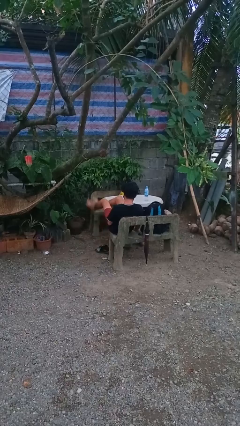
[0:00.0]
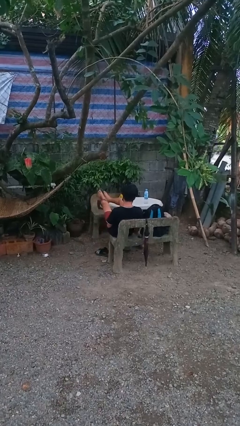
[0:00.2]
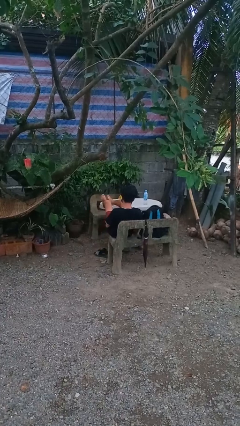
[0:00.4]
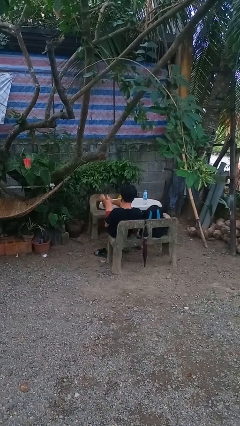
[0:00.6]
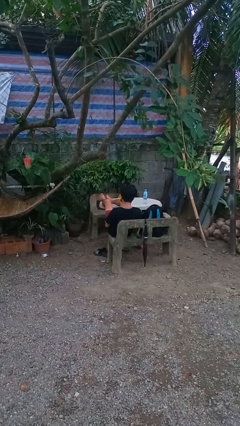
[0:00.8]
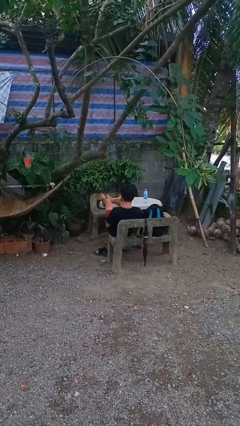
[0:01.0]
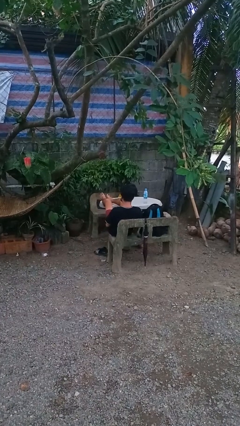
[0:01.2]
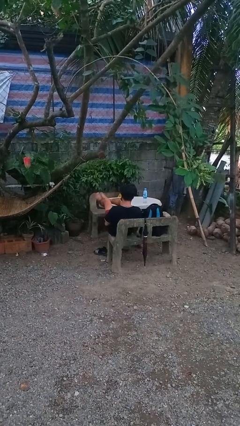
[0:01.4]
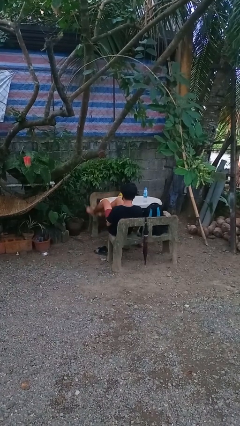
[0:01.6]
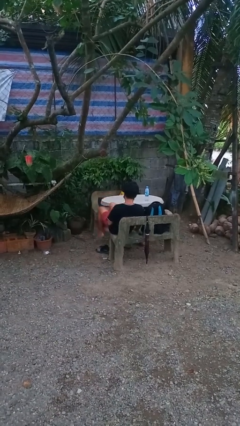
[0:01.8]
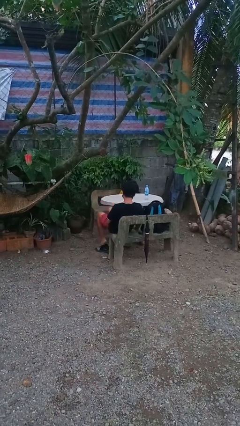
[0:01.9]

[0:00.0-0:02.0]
person puts feet up

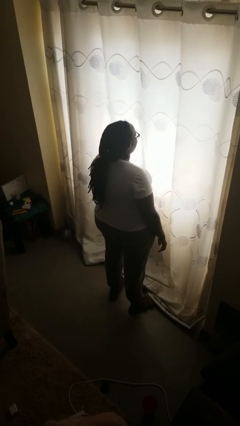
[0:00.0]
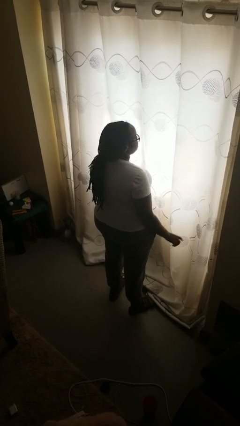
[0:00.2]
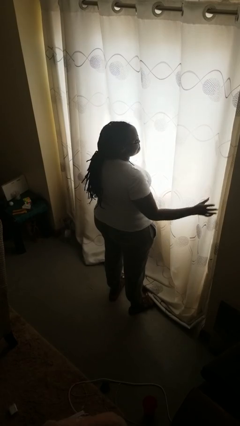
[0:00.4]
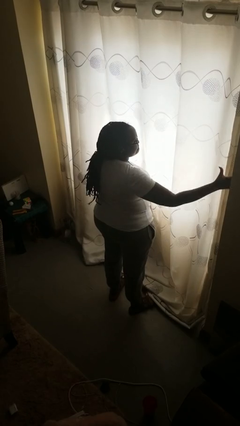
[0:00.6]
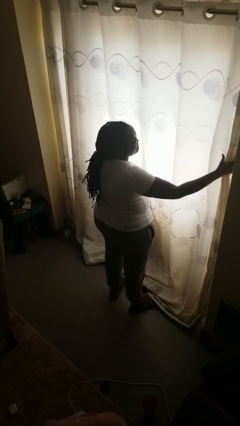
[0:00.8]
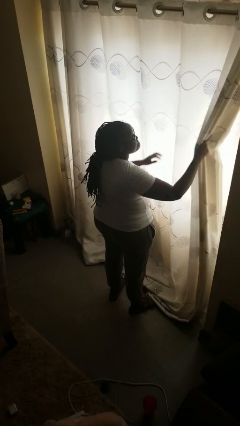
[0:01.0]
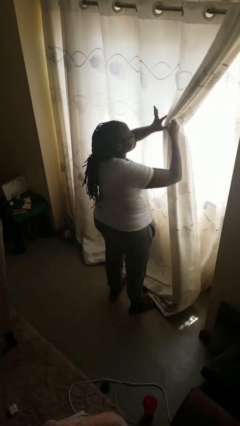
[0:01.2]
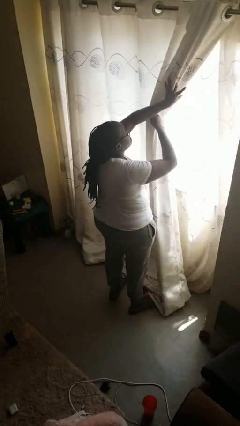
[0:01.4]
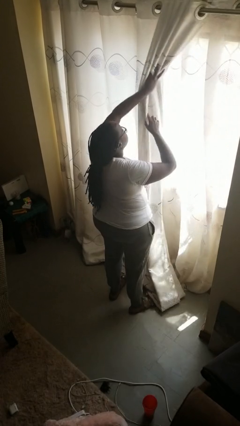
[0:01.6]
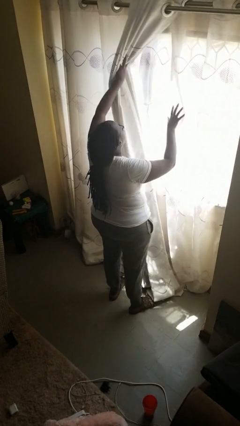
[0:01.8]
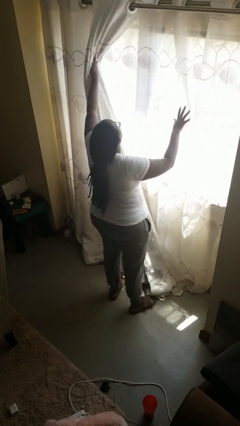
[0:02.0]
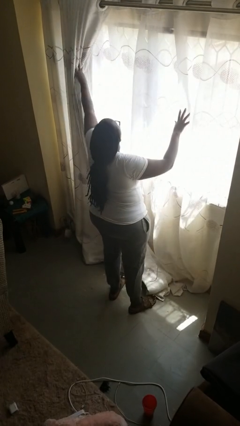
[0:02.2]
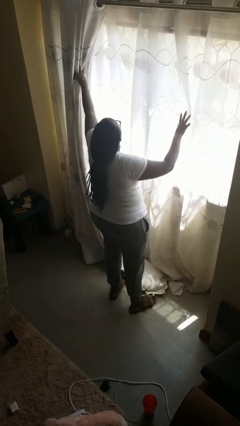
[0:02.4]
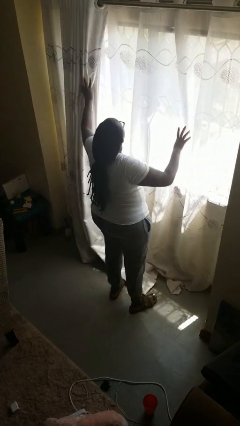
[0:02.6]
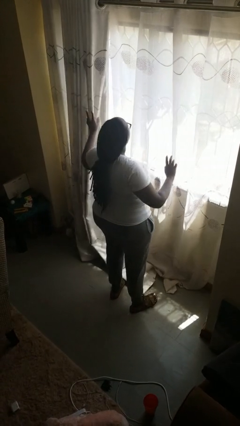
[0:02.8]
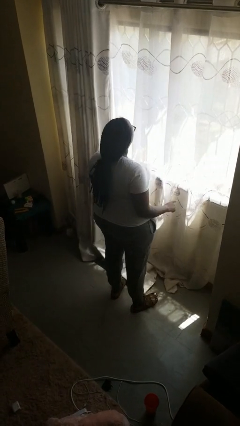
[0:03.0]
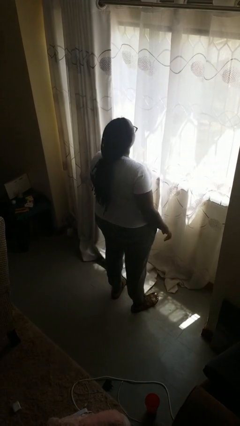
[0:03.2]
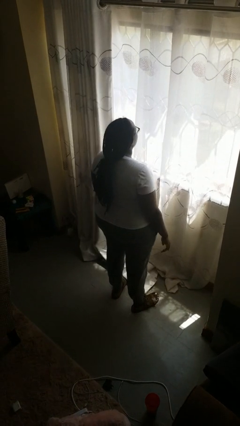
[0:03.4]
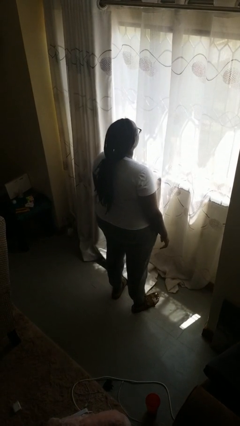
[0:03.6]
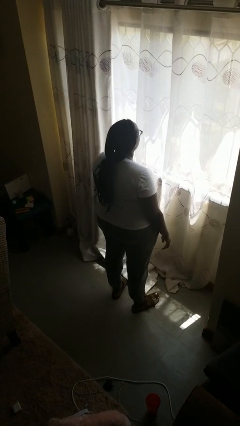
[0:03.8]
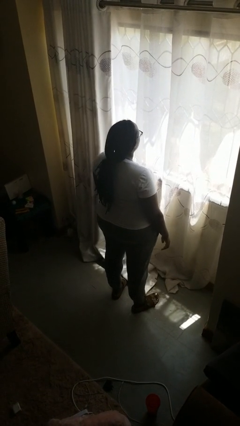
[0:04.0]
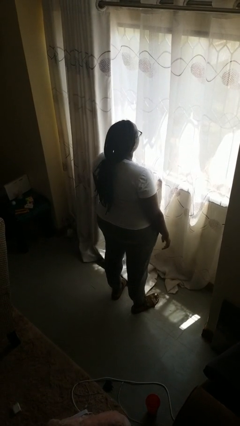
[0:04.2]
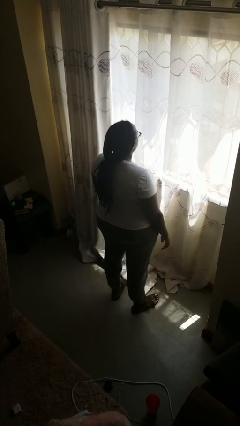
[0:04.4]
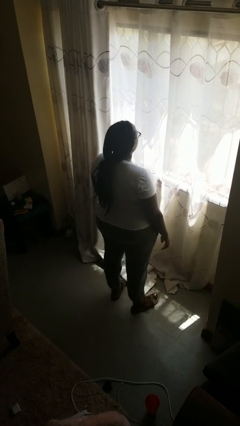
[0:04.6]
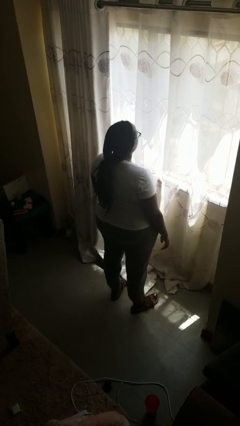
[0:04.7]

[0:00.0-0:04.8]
person opens curtains

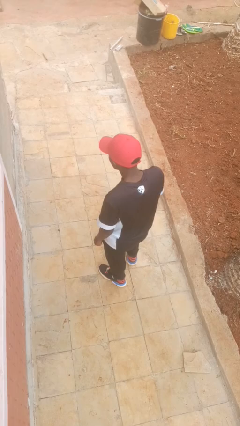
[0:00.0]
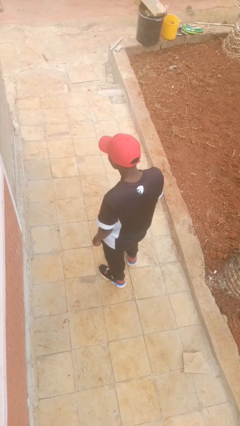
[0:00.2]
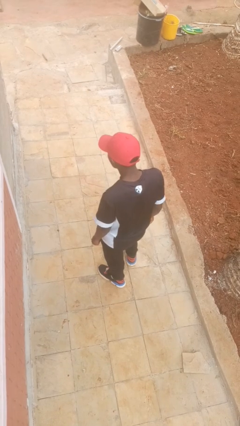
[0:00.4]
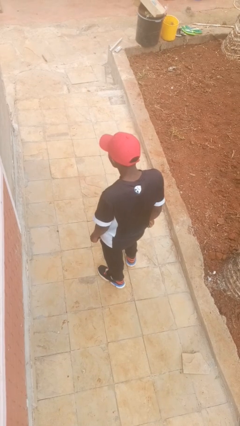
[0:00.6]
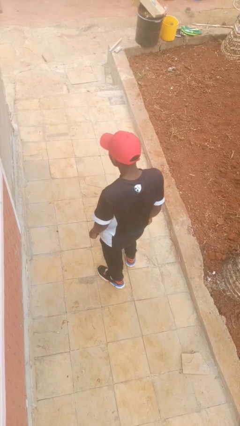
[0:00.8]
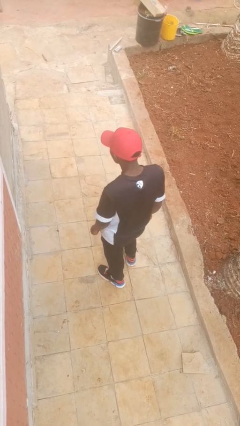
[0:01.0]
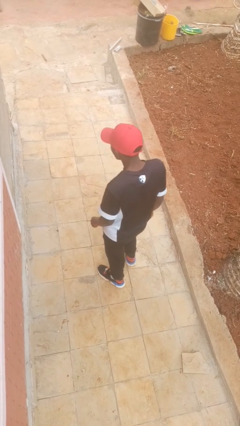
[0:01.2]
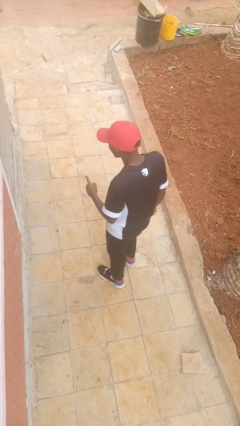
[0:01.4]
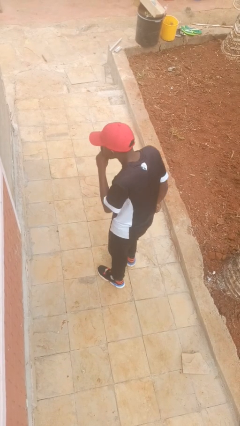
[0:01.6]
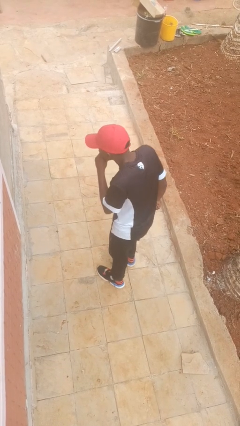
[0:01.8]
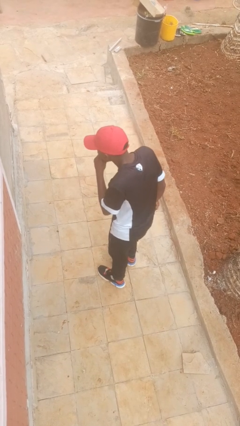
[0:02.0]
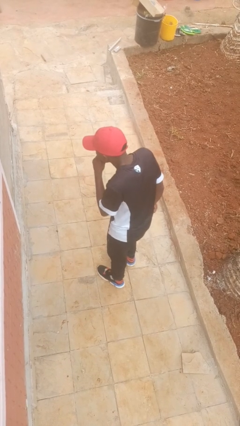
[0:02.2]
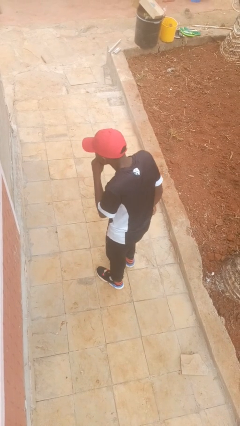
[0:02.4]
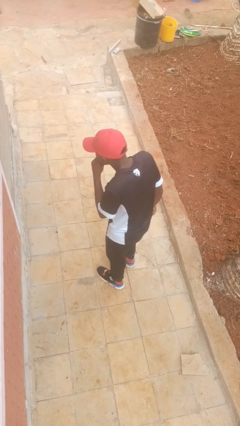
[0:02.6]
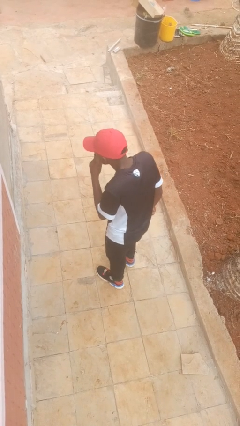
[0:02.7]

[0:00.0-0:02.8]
person gestures be quiet

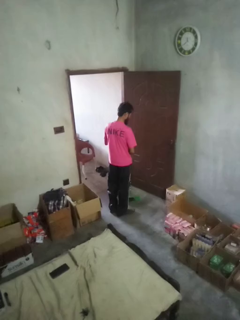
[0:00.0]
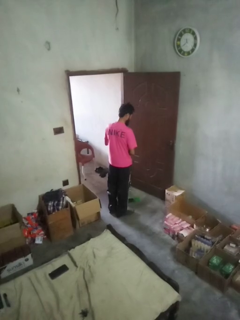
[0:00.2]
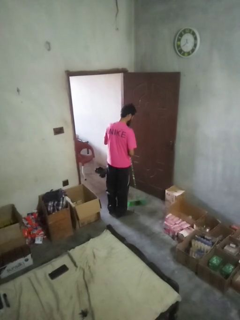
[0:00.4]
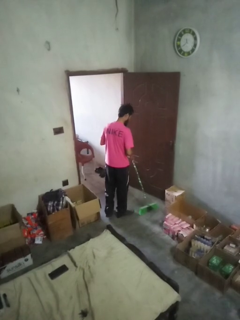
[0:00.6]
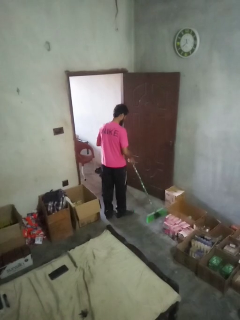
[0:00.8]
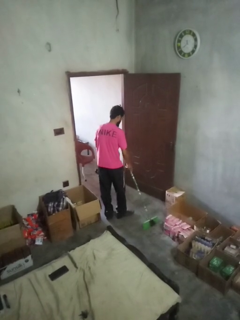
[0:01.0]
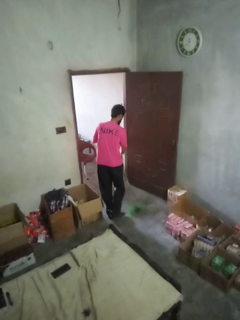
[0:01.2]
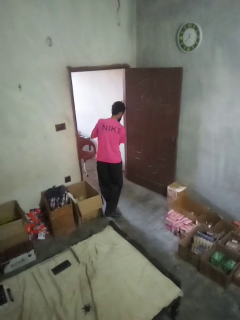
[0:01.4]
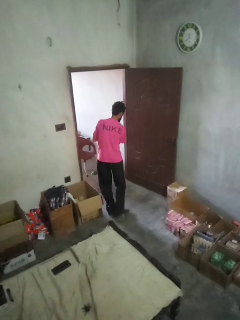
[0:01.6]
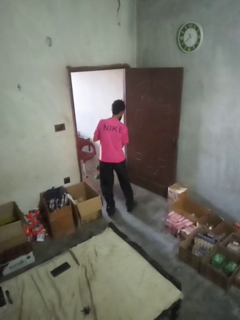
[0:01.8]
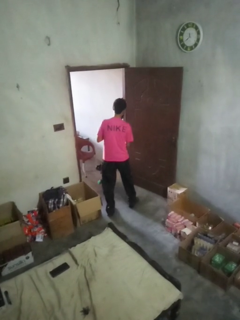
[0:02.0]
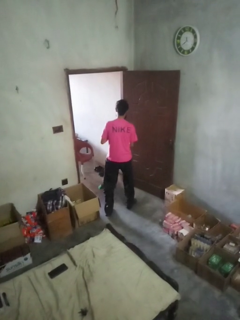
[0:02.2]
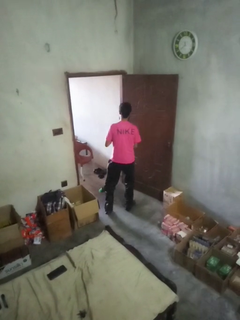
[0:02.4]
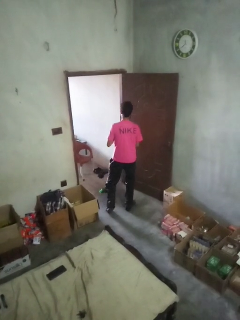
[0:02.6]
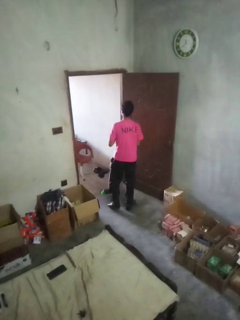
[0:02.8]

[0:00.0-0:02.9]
person sweeps floor

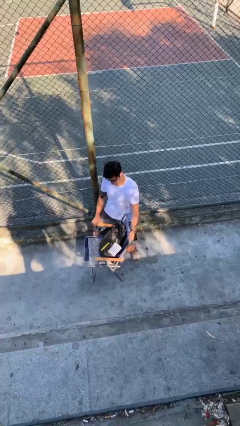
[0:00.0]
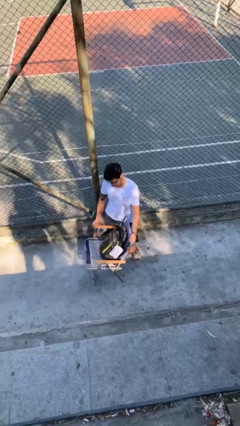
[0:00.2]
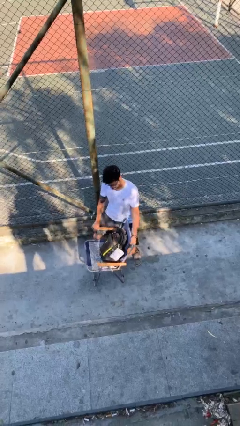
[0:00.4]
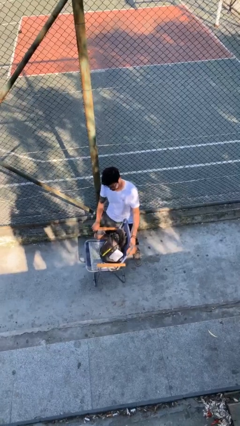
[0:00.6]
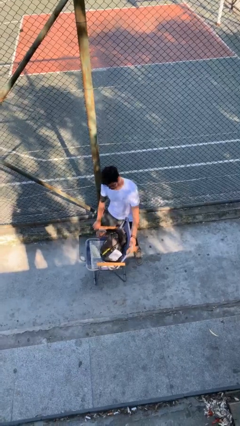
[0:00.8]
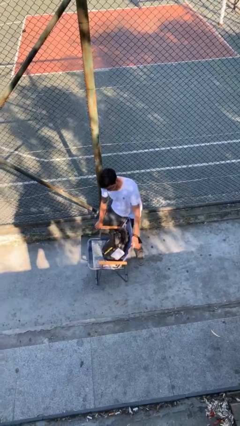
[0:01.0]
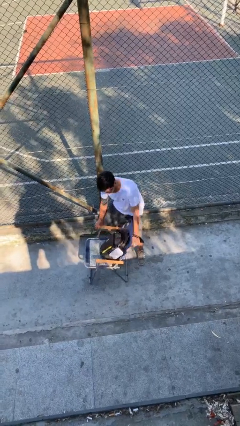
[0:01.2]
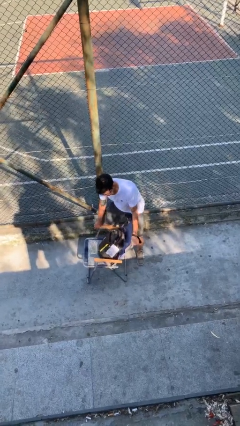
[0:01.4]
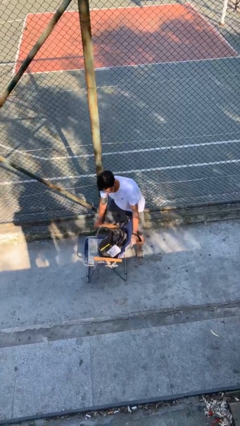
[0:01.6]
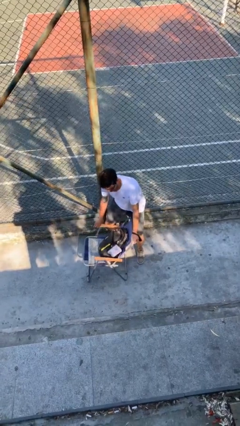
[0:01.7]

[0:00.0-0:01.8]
person puts down object on floor

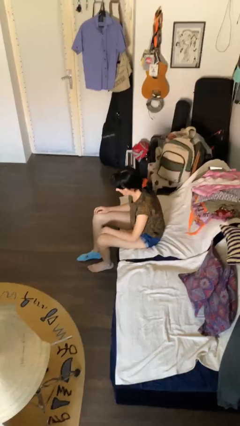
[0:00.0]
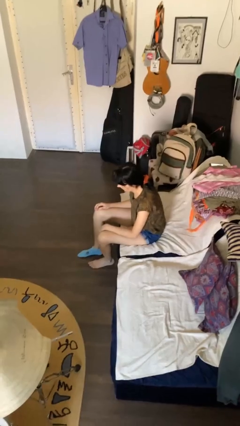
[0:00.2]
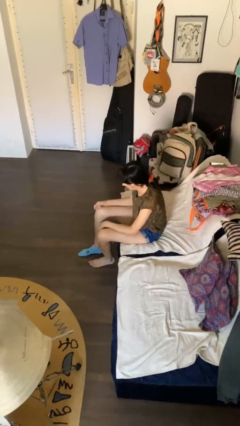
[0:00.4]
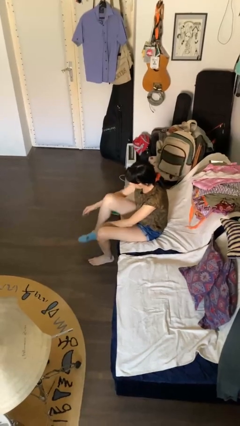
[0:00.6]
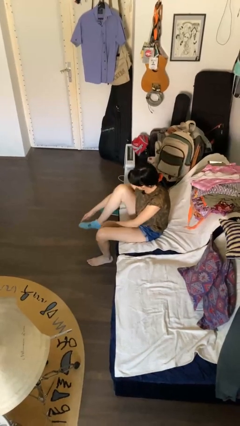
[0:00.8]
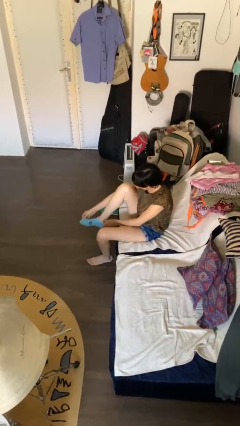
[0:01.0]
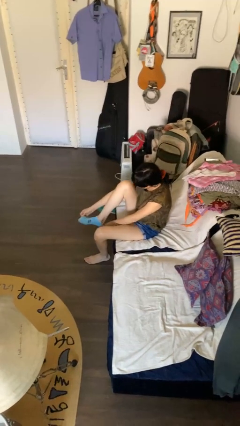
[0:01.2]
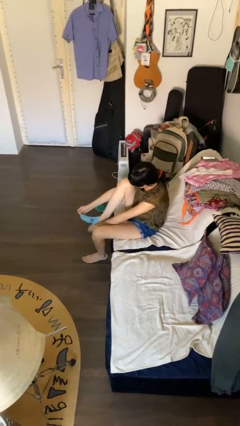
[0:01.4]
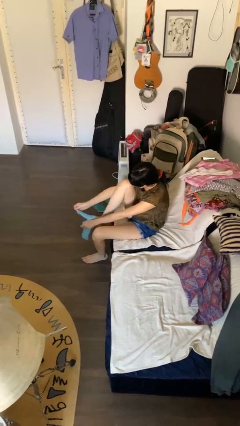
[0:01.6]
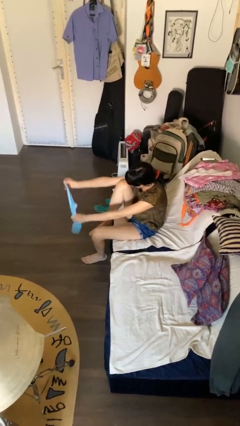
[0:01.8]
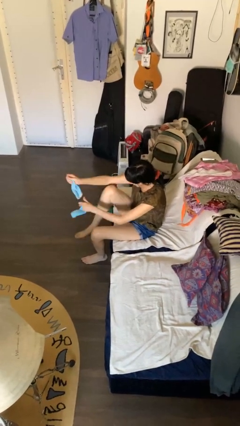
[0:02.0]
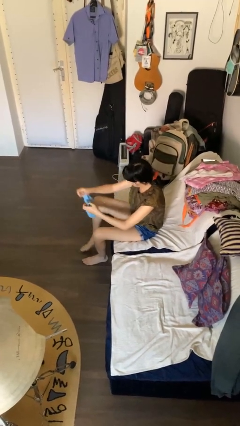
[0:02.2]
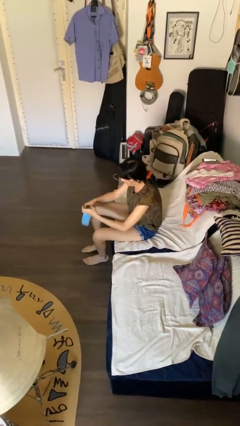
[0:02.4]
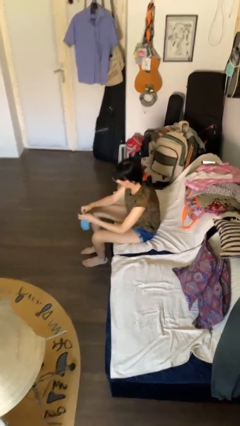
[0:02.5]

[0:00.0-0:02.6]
person takes off socks

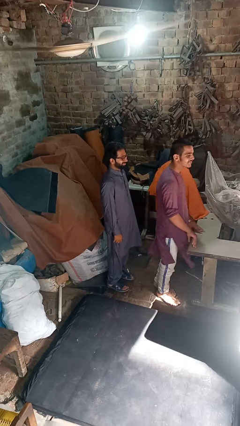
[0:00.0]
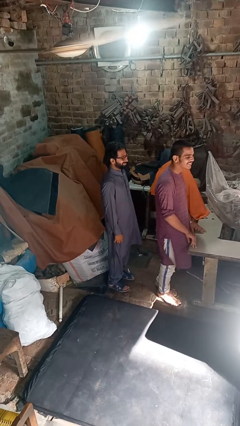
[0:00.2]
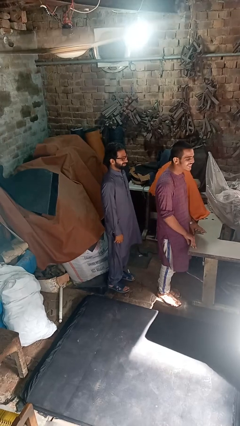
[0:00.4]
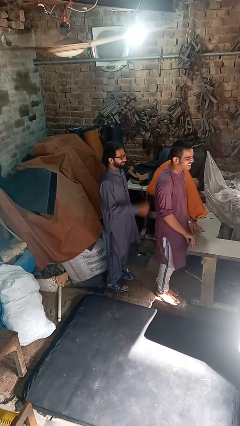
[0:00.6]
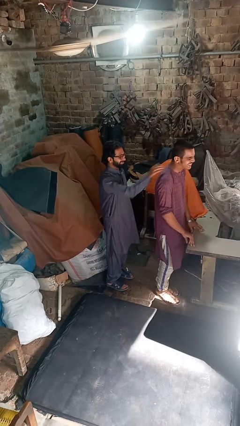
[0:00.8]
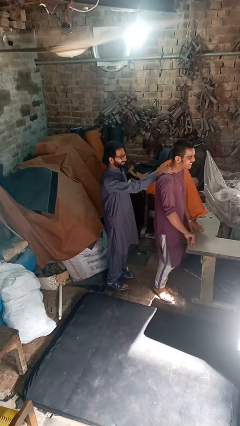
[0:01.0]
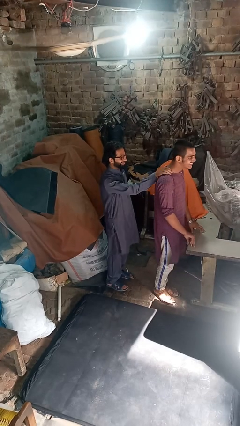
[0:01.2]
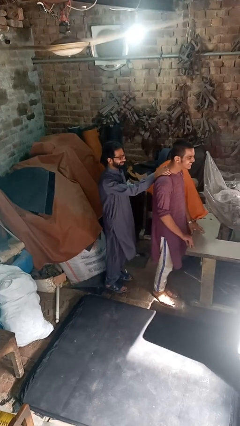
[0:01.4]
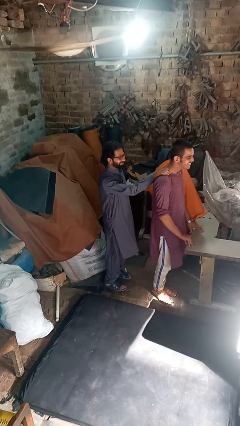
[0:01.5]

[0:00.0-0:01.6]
person grabs person by shoulder
